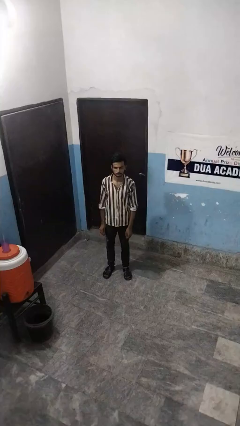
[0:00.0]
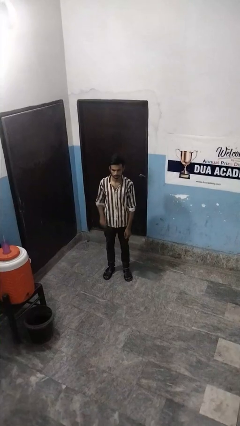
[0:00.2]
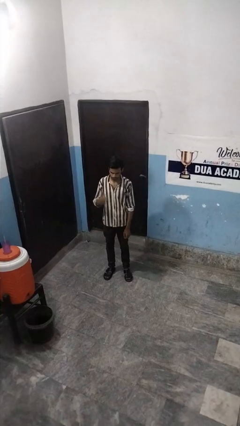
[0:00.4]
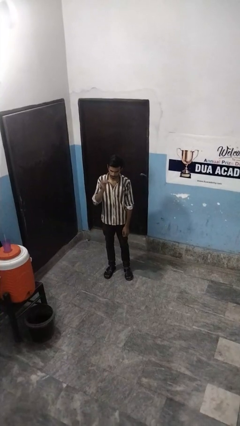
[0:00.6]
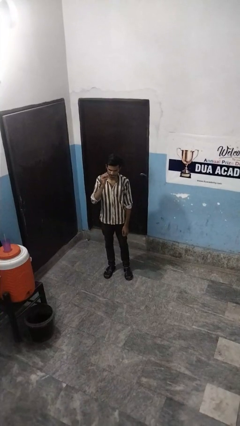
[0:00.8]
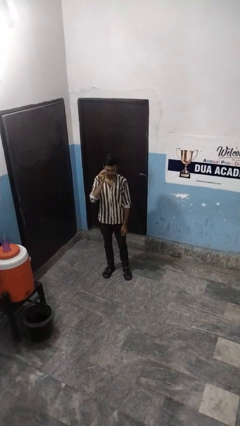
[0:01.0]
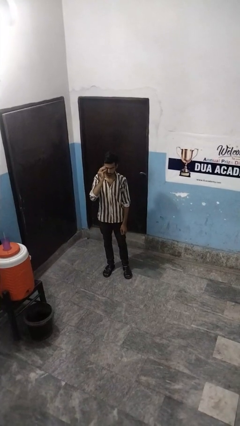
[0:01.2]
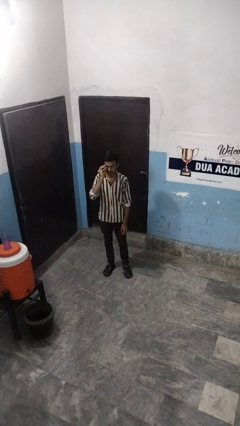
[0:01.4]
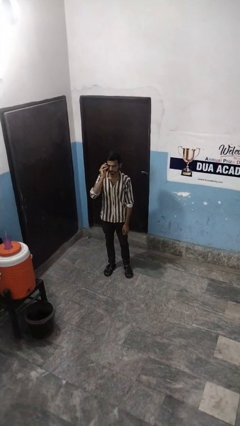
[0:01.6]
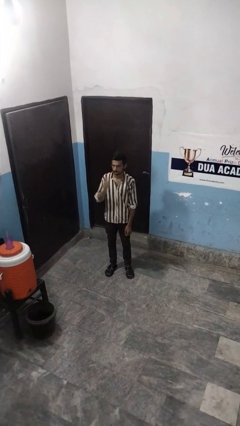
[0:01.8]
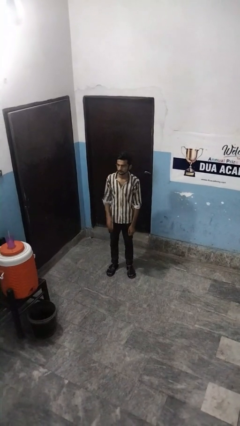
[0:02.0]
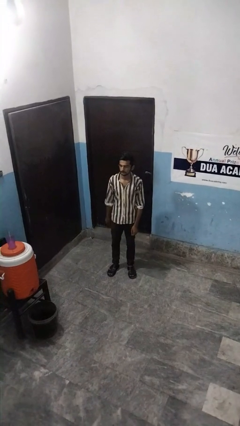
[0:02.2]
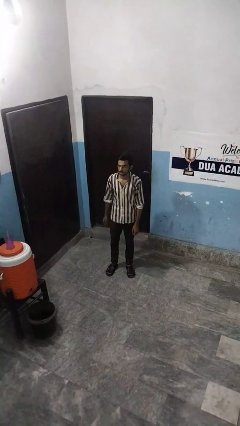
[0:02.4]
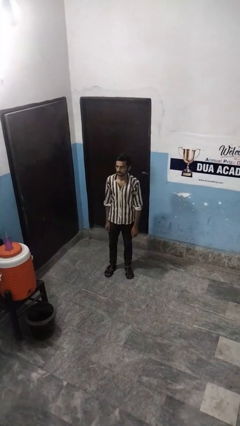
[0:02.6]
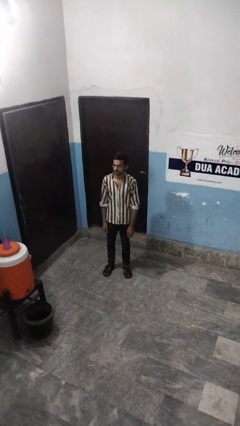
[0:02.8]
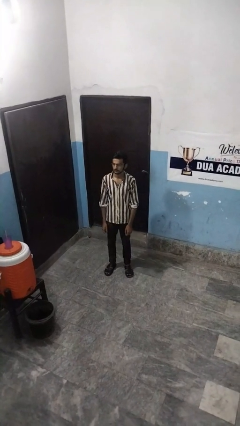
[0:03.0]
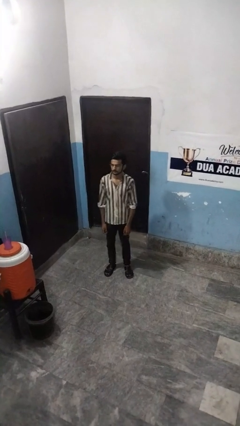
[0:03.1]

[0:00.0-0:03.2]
person puts on glasses

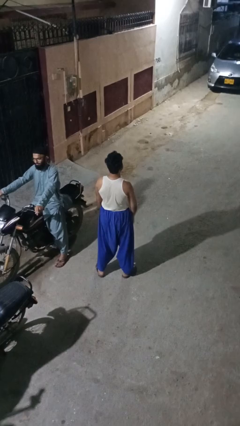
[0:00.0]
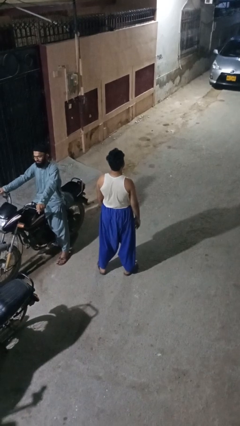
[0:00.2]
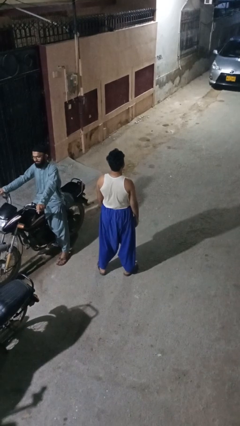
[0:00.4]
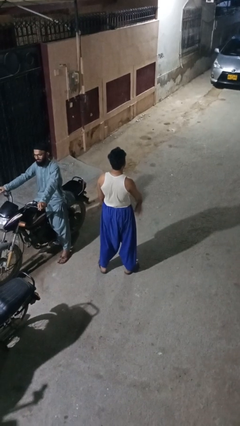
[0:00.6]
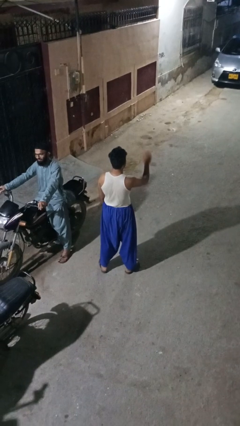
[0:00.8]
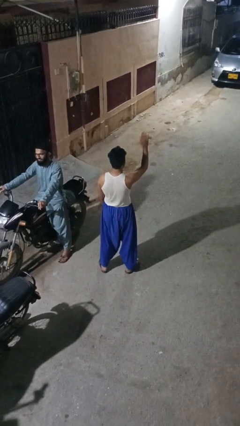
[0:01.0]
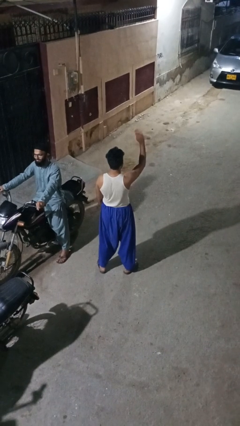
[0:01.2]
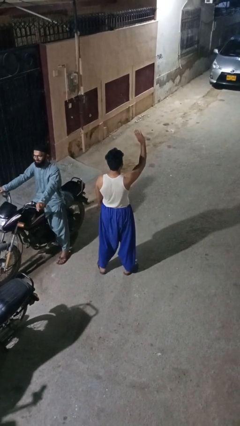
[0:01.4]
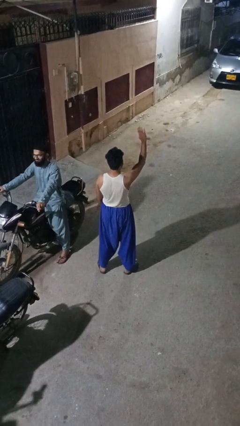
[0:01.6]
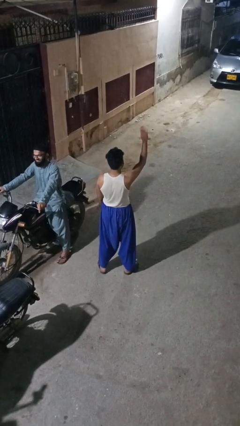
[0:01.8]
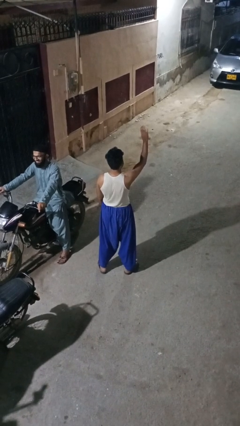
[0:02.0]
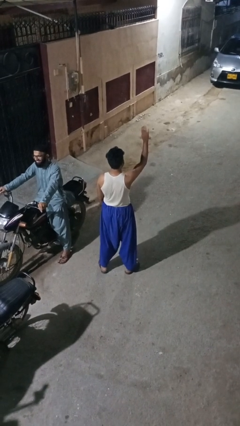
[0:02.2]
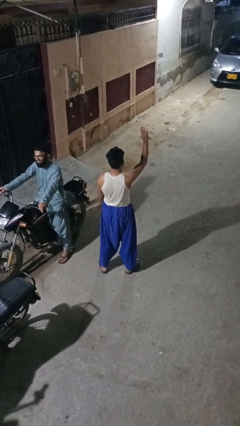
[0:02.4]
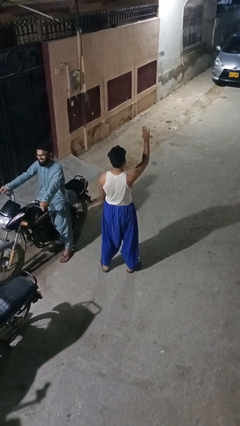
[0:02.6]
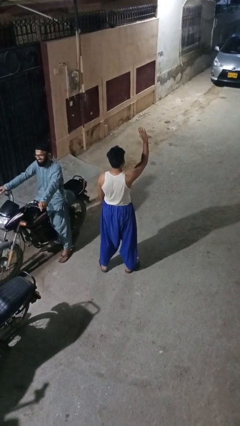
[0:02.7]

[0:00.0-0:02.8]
person waves at person

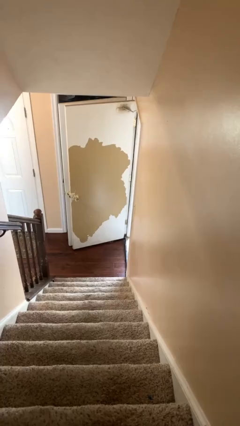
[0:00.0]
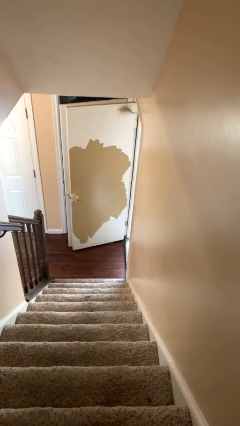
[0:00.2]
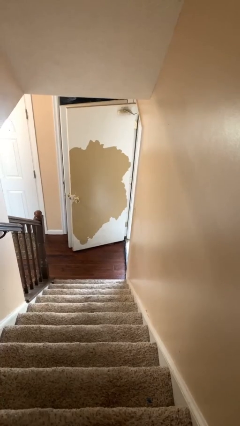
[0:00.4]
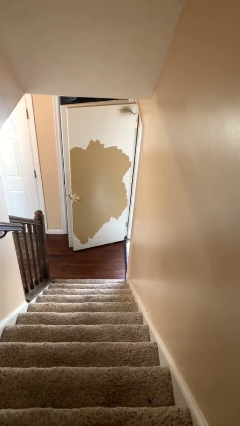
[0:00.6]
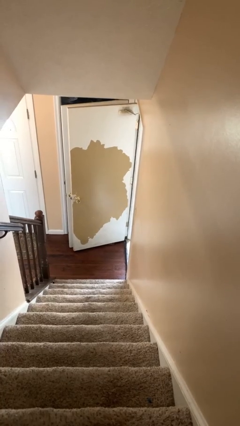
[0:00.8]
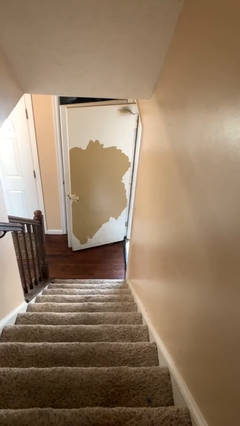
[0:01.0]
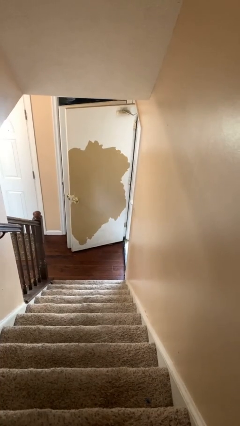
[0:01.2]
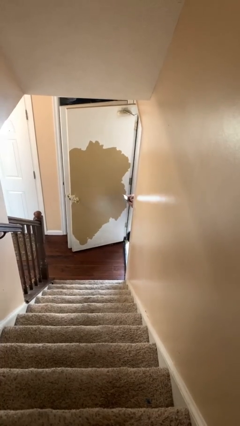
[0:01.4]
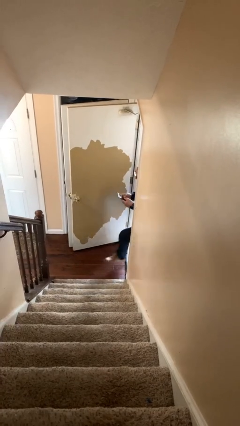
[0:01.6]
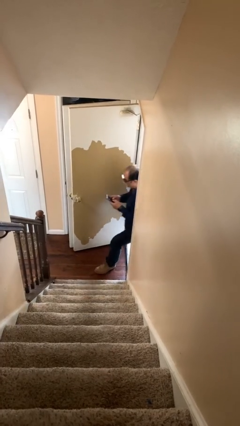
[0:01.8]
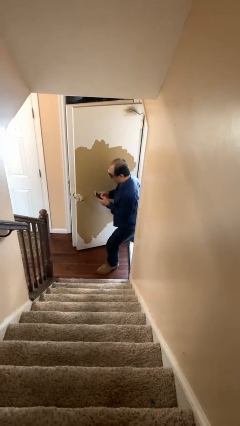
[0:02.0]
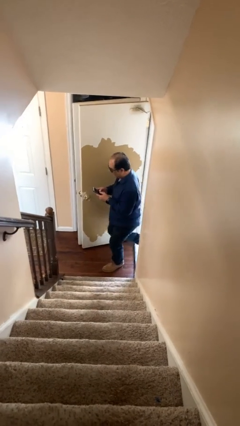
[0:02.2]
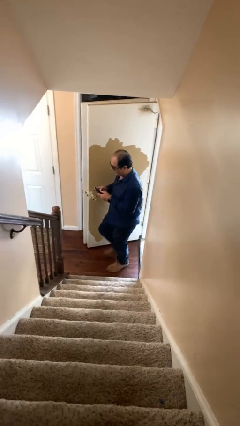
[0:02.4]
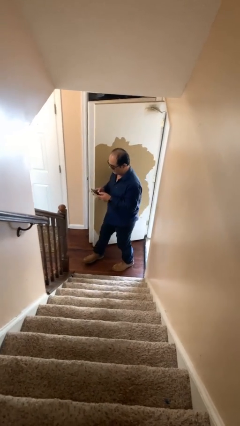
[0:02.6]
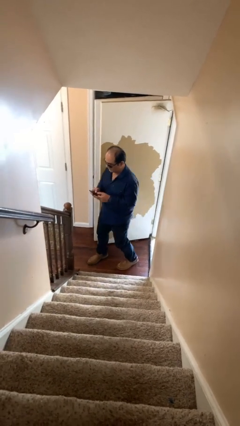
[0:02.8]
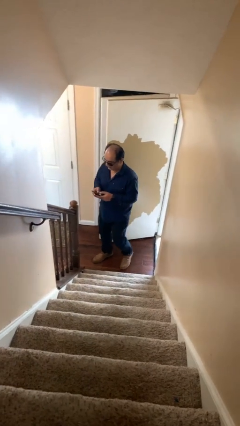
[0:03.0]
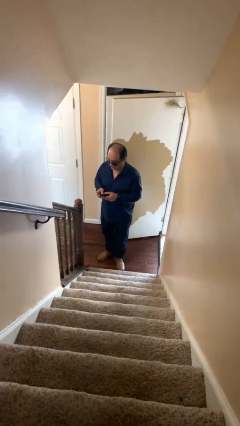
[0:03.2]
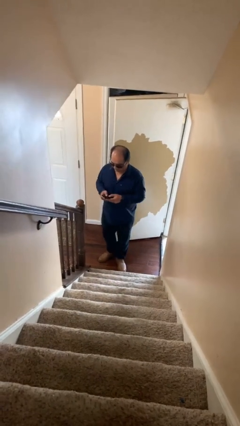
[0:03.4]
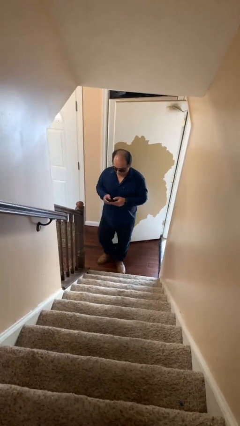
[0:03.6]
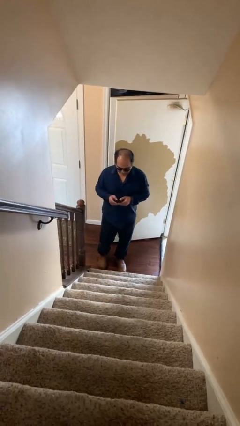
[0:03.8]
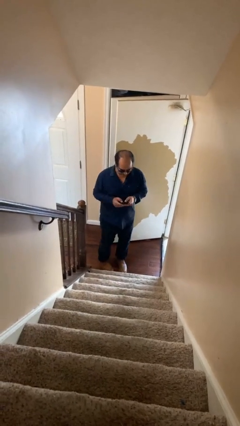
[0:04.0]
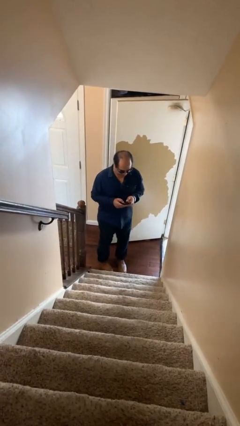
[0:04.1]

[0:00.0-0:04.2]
person enters scene through structure

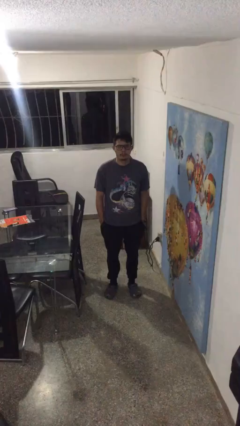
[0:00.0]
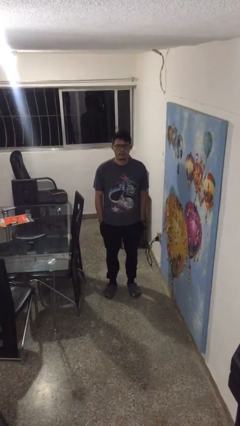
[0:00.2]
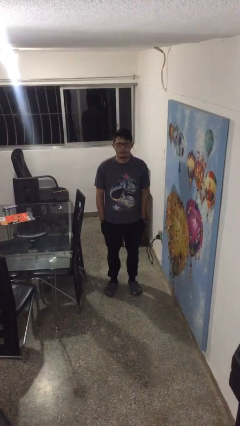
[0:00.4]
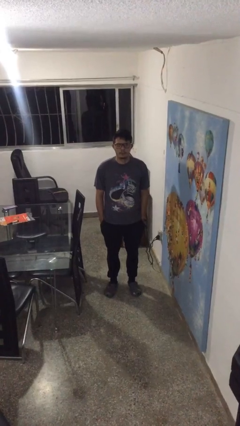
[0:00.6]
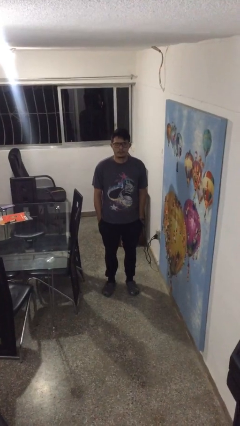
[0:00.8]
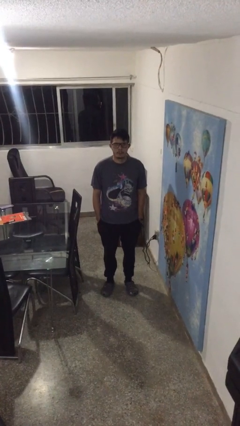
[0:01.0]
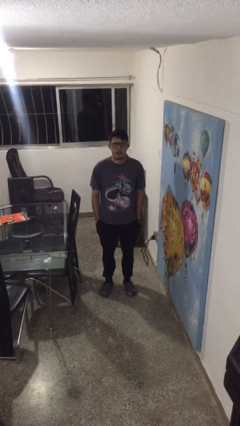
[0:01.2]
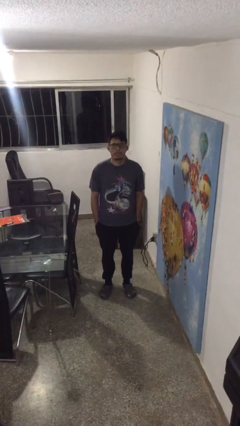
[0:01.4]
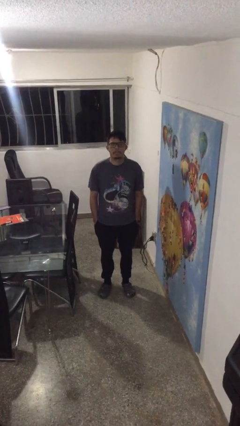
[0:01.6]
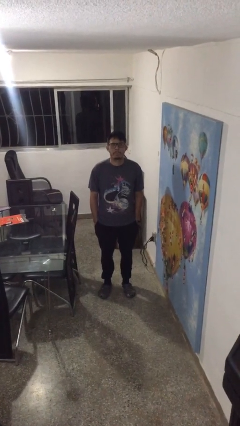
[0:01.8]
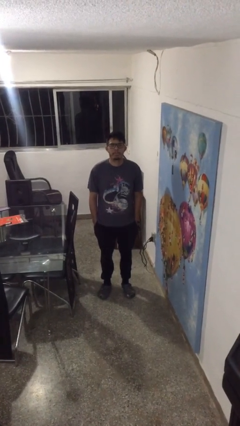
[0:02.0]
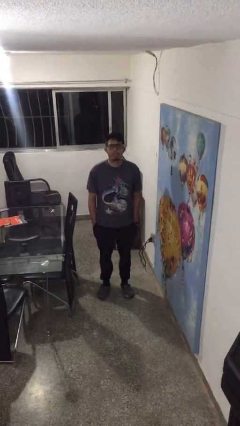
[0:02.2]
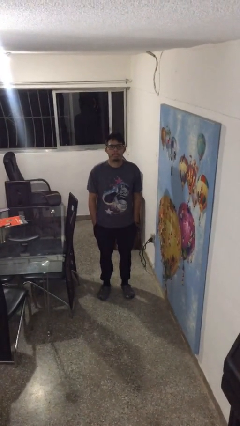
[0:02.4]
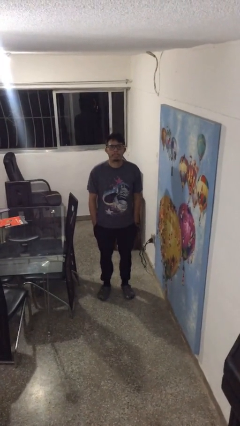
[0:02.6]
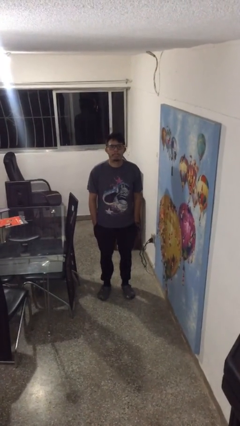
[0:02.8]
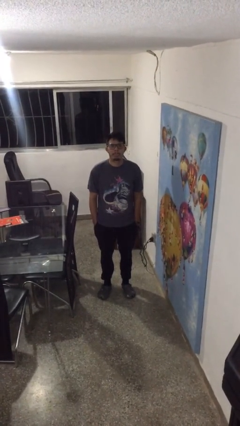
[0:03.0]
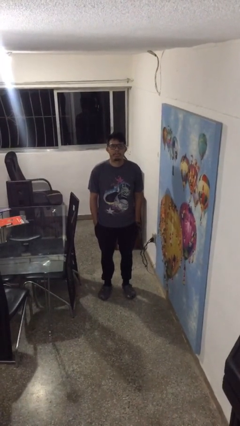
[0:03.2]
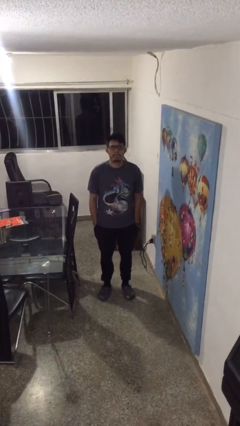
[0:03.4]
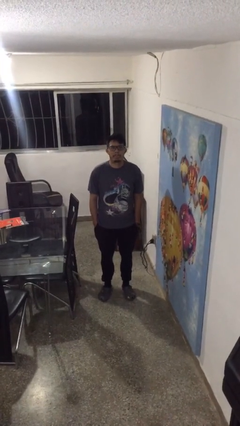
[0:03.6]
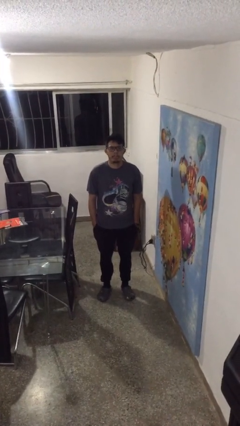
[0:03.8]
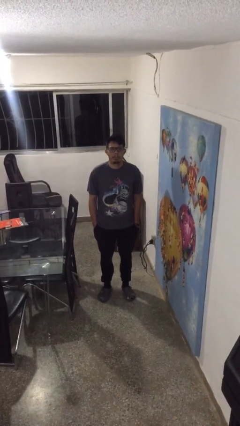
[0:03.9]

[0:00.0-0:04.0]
person sticks out tongue

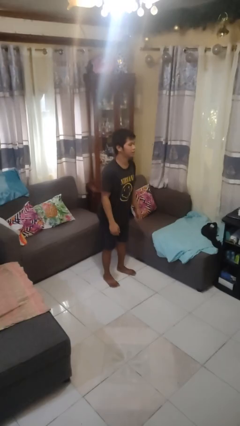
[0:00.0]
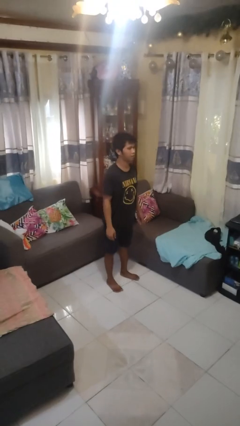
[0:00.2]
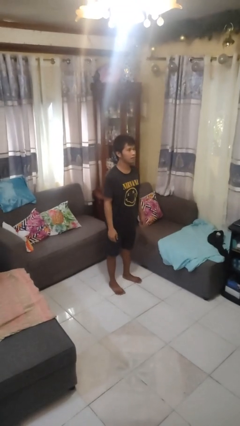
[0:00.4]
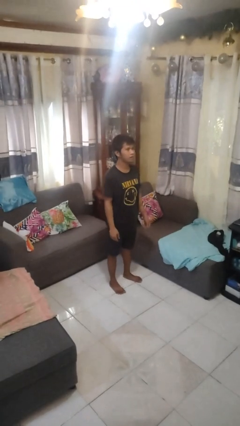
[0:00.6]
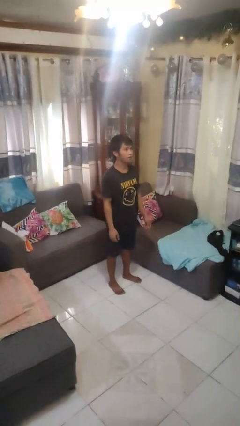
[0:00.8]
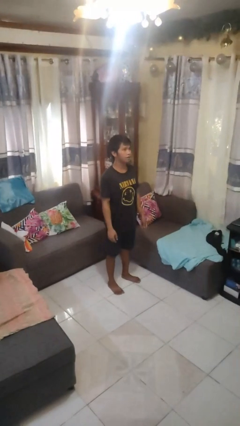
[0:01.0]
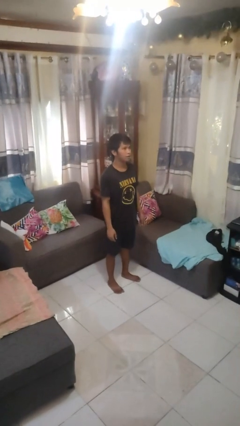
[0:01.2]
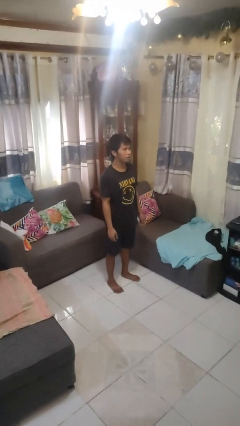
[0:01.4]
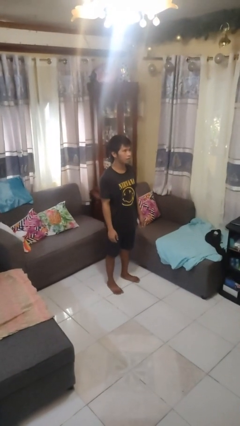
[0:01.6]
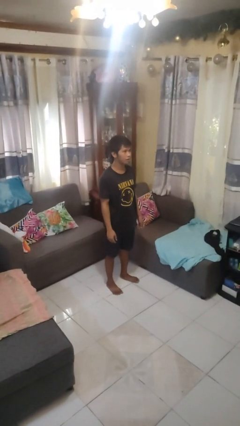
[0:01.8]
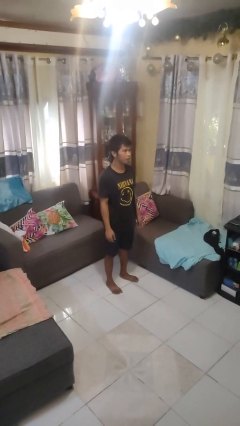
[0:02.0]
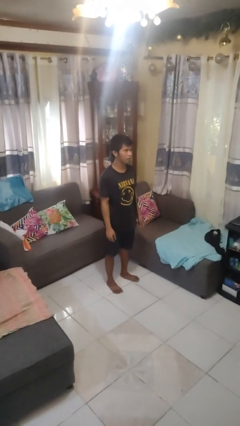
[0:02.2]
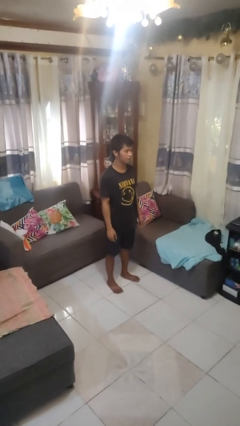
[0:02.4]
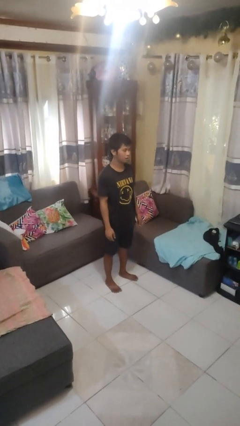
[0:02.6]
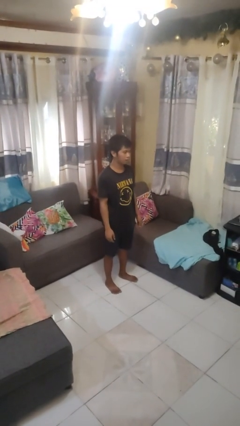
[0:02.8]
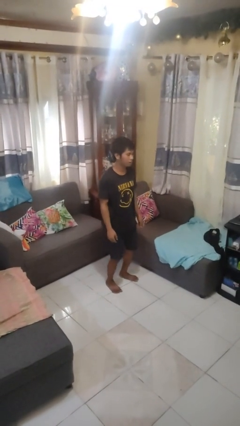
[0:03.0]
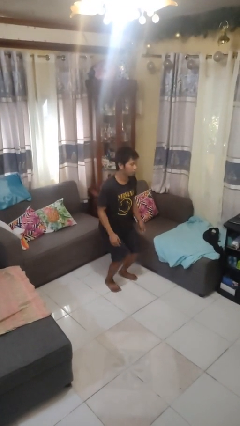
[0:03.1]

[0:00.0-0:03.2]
person stands up
